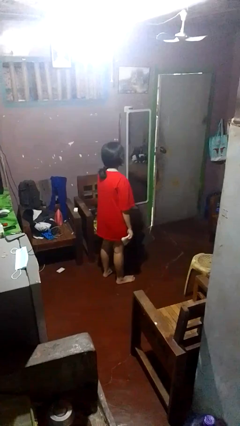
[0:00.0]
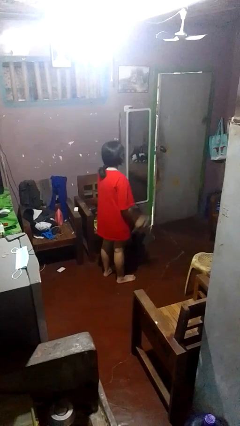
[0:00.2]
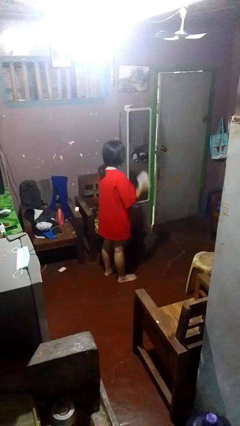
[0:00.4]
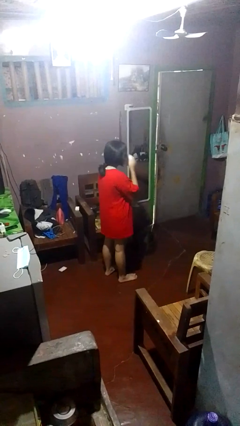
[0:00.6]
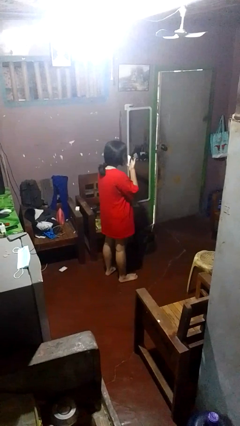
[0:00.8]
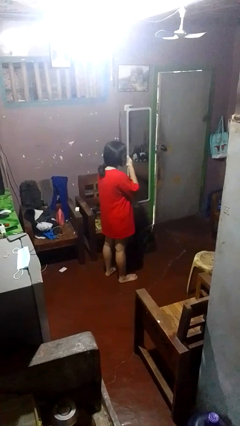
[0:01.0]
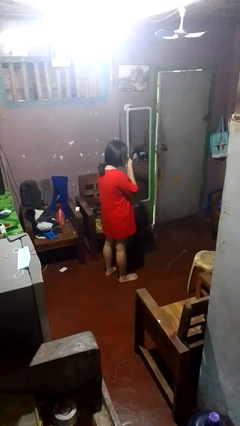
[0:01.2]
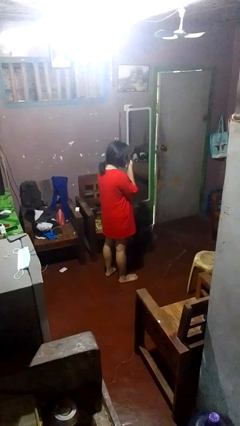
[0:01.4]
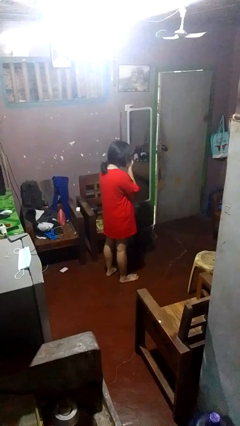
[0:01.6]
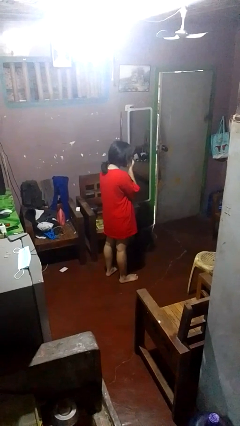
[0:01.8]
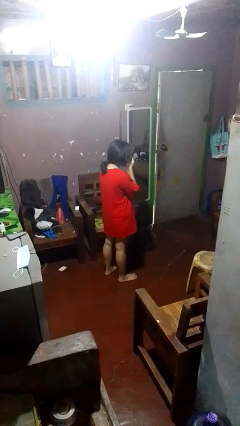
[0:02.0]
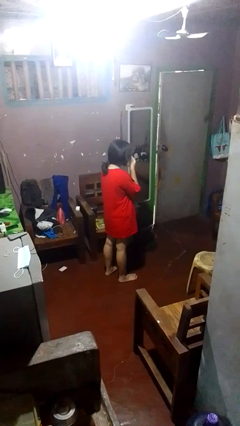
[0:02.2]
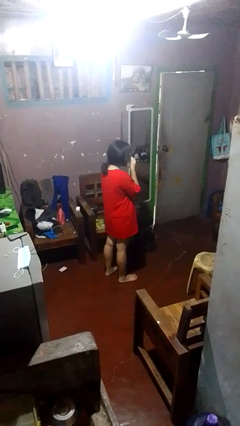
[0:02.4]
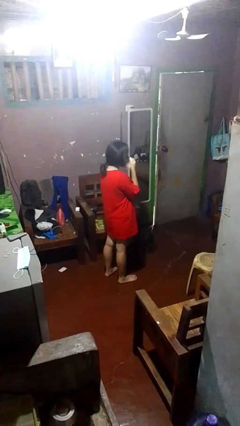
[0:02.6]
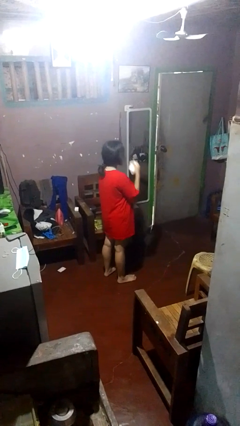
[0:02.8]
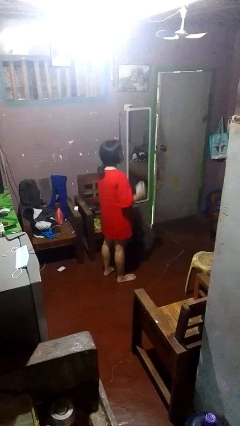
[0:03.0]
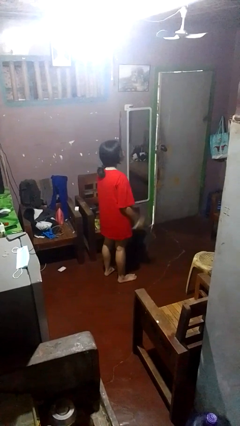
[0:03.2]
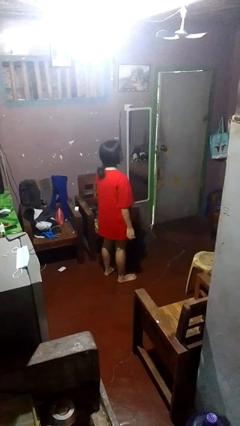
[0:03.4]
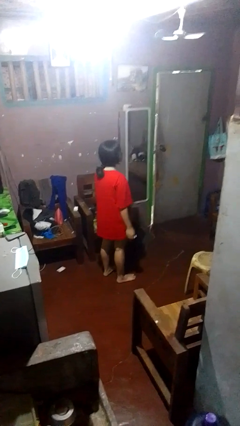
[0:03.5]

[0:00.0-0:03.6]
person blows nose

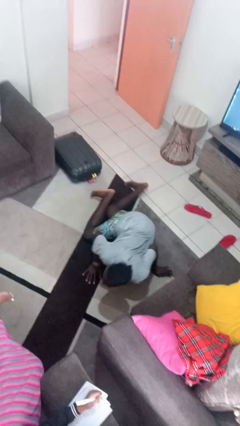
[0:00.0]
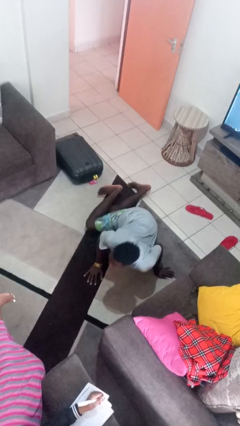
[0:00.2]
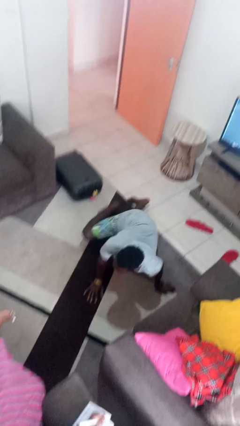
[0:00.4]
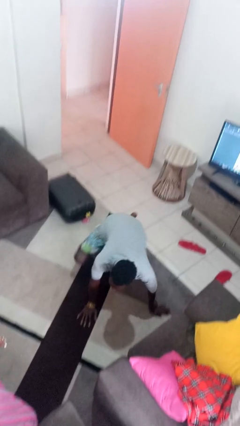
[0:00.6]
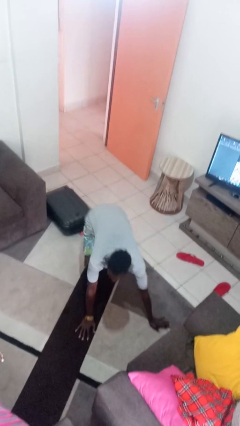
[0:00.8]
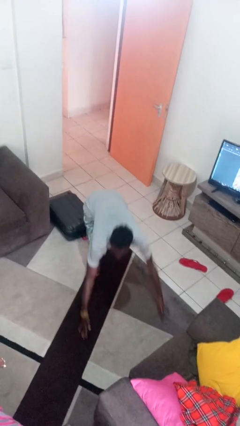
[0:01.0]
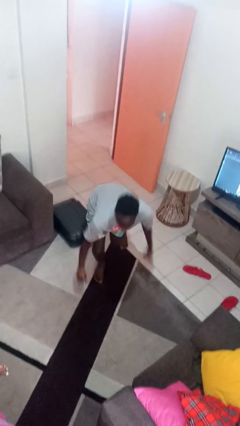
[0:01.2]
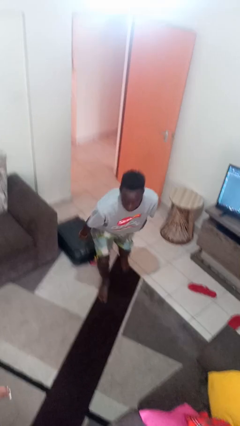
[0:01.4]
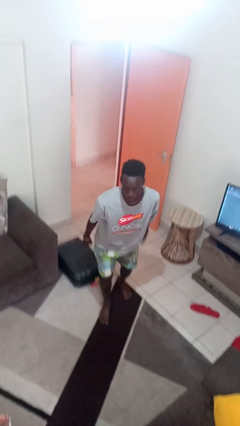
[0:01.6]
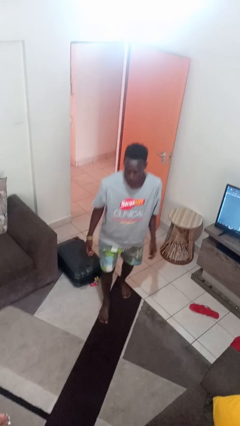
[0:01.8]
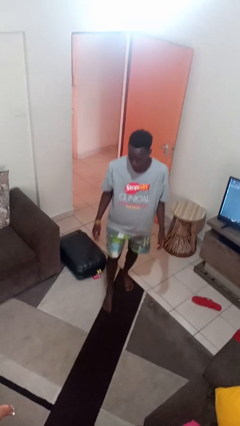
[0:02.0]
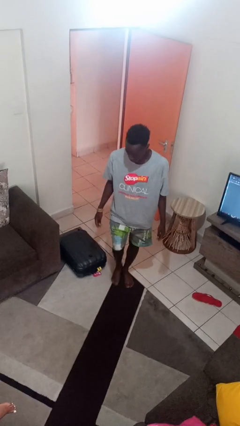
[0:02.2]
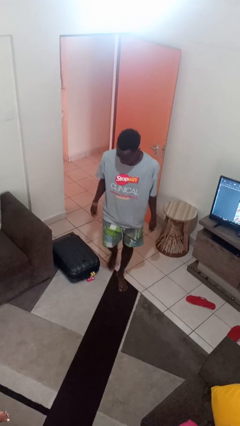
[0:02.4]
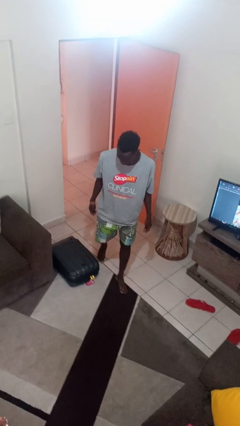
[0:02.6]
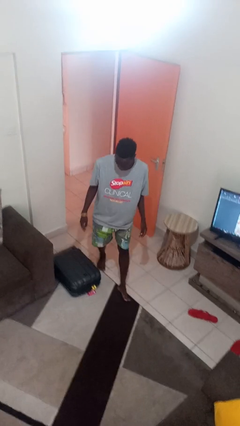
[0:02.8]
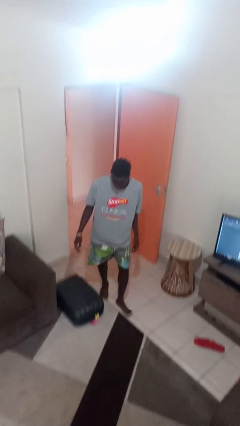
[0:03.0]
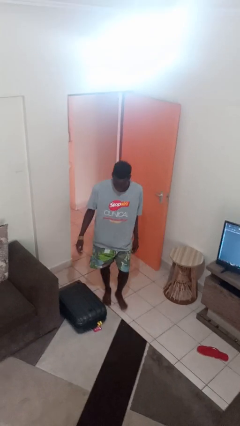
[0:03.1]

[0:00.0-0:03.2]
person stands up from floor

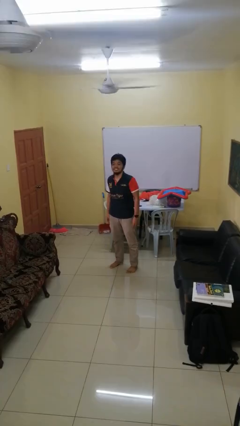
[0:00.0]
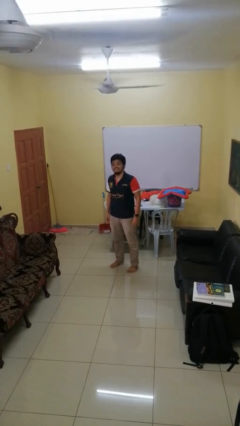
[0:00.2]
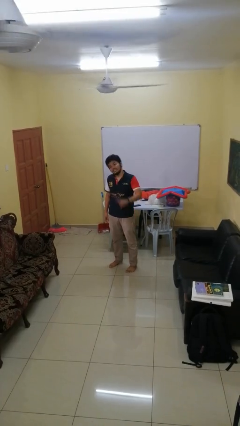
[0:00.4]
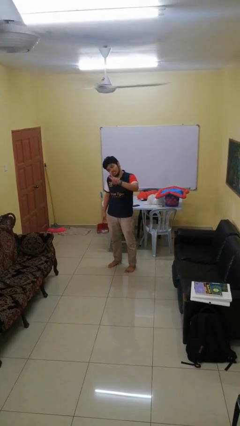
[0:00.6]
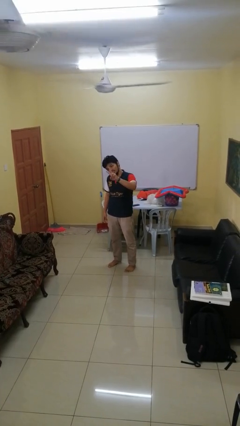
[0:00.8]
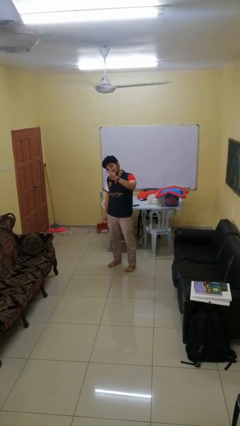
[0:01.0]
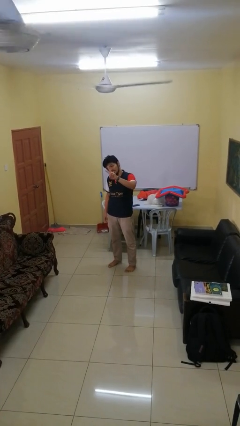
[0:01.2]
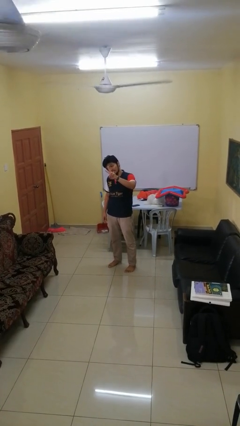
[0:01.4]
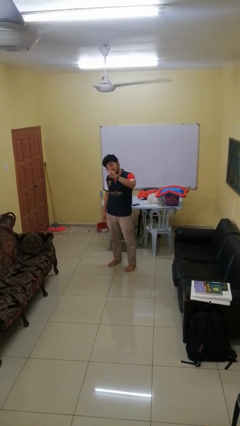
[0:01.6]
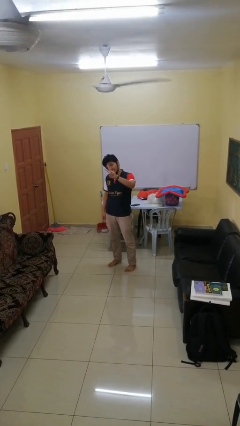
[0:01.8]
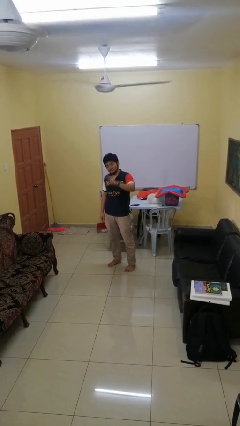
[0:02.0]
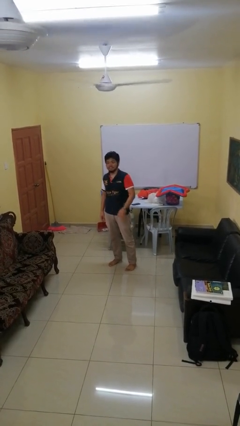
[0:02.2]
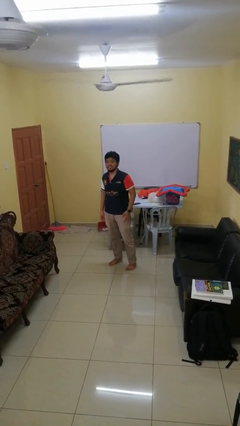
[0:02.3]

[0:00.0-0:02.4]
person gestures peace

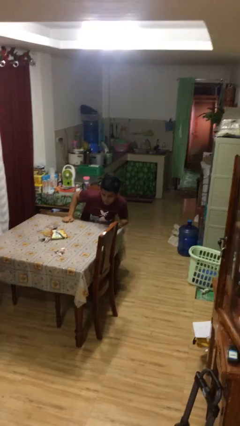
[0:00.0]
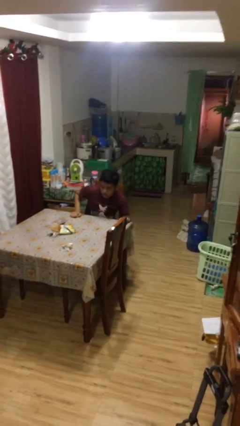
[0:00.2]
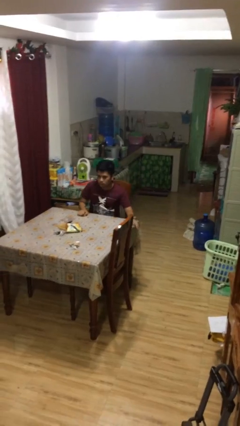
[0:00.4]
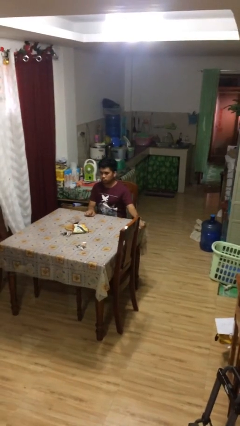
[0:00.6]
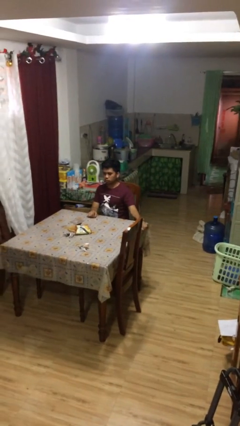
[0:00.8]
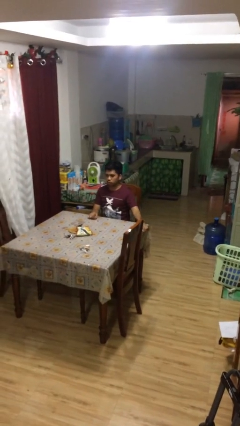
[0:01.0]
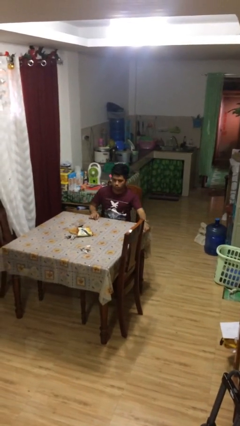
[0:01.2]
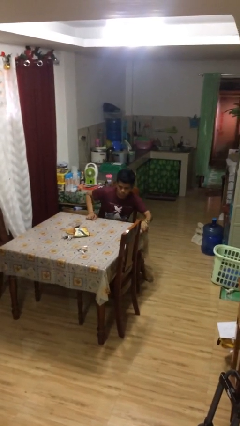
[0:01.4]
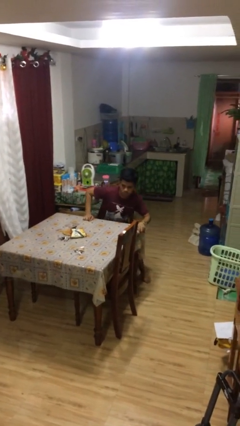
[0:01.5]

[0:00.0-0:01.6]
person sits down

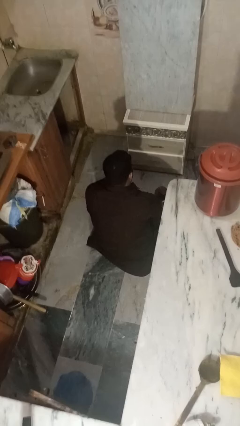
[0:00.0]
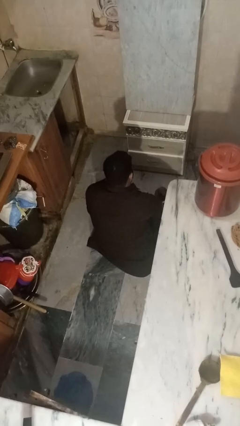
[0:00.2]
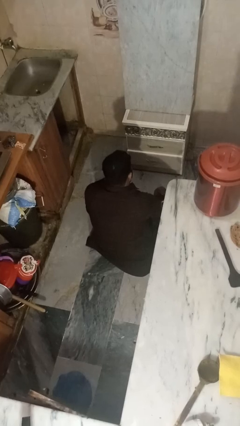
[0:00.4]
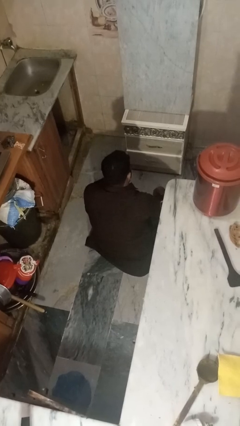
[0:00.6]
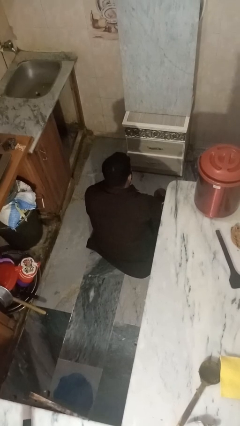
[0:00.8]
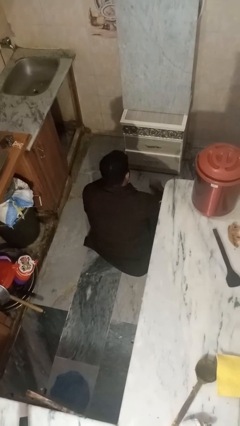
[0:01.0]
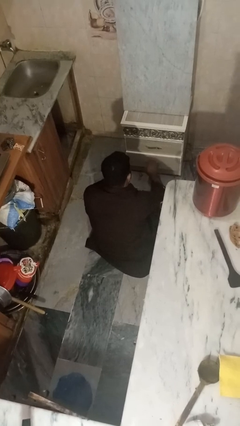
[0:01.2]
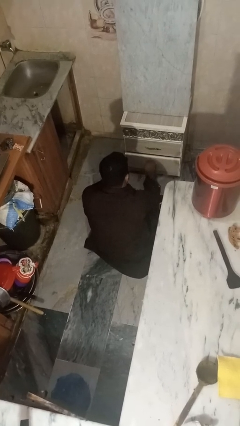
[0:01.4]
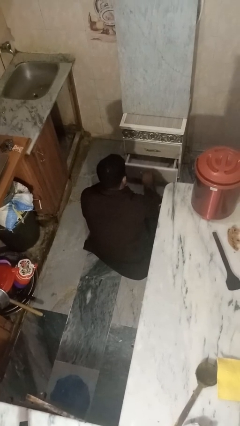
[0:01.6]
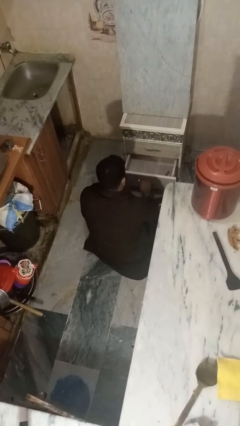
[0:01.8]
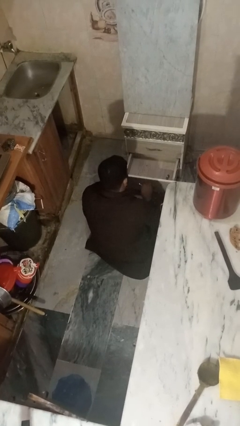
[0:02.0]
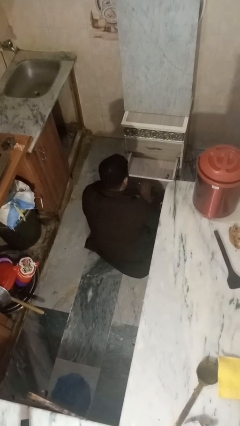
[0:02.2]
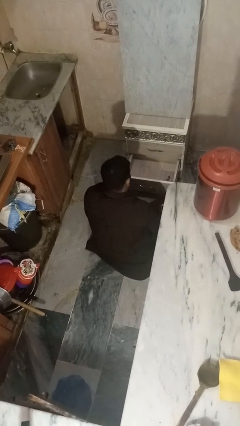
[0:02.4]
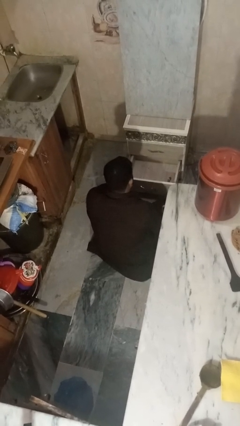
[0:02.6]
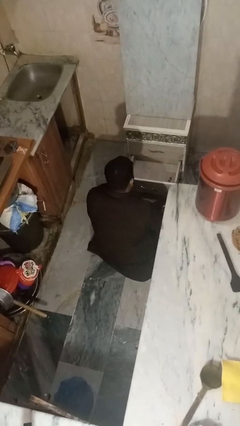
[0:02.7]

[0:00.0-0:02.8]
person opens kitchen drawer

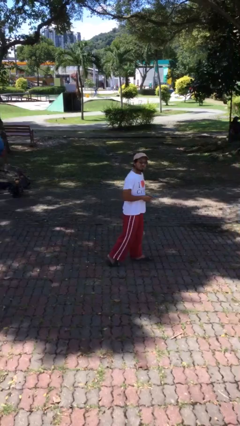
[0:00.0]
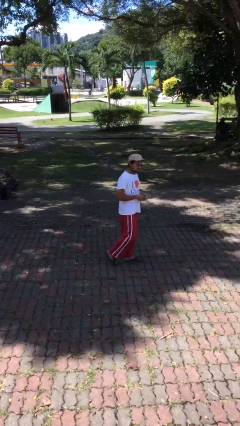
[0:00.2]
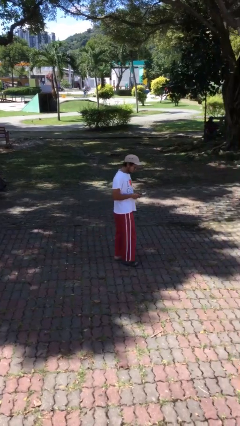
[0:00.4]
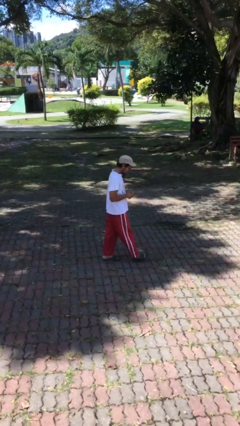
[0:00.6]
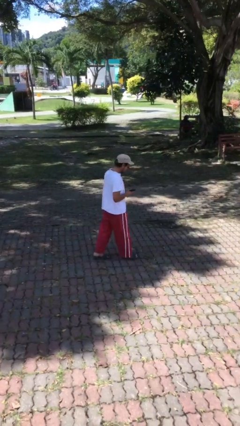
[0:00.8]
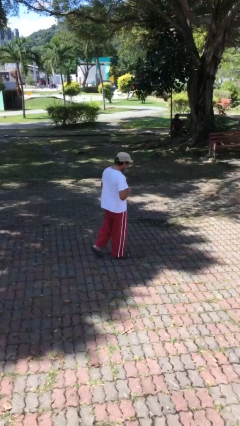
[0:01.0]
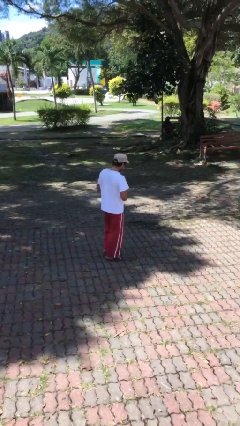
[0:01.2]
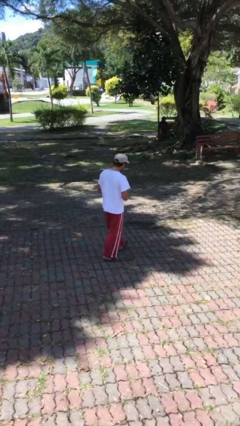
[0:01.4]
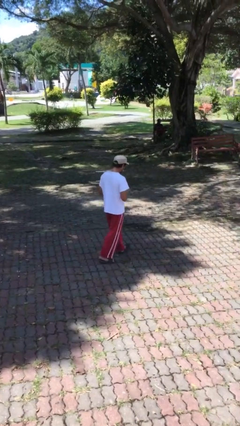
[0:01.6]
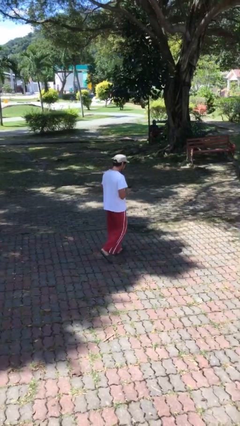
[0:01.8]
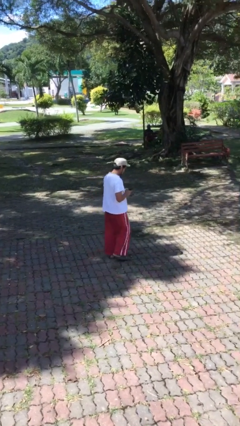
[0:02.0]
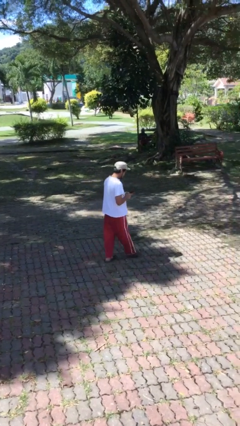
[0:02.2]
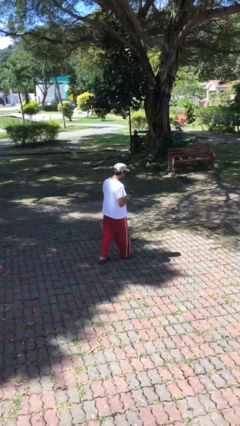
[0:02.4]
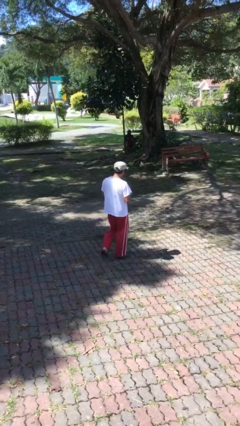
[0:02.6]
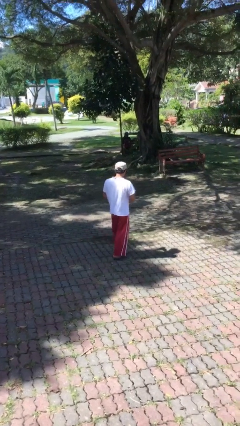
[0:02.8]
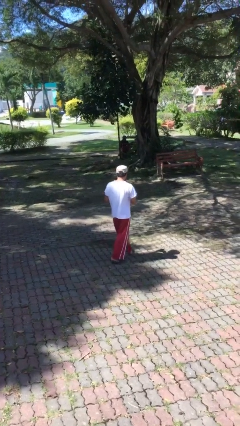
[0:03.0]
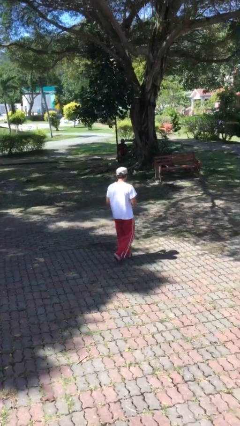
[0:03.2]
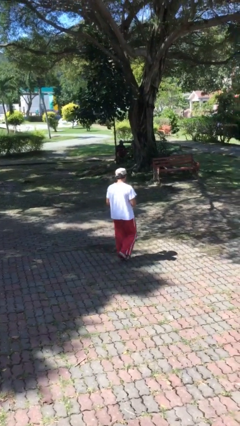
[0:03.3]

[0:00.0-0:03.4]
person texts on phone

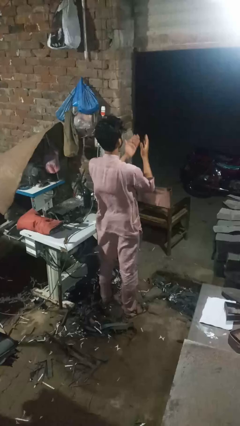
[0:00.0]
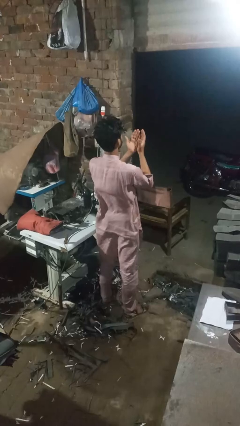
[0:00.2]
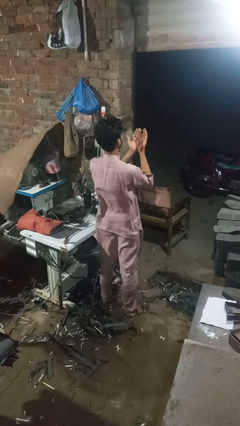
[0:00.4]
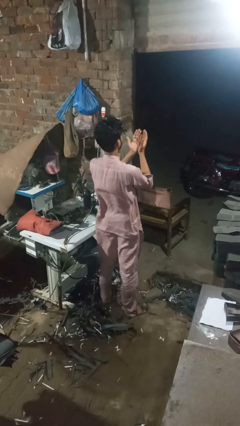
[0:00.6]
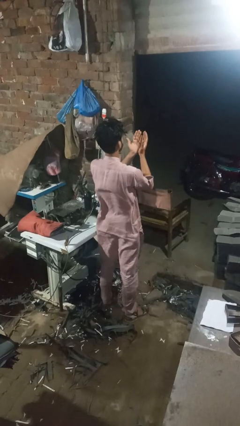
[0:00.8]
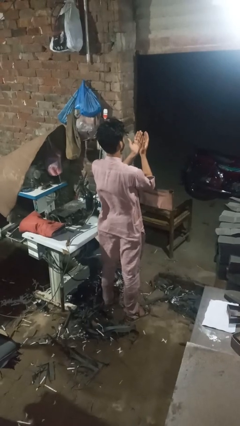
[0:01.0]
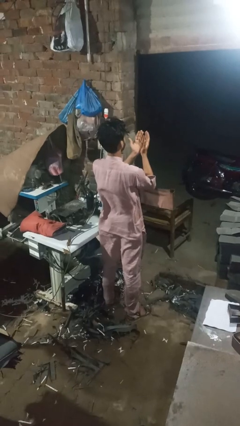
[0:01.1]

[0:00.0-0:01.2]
person prays
